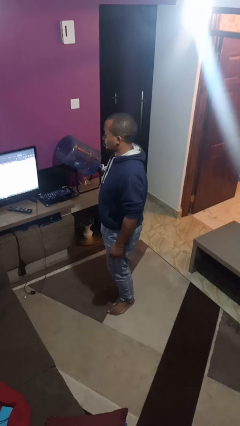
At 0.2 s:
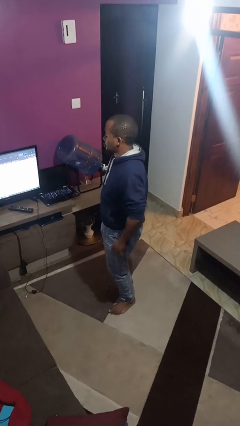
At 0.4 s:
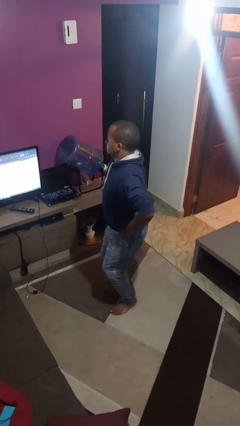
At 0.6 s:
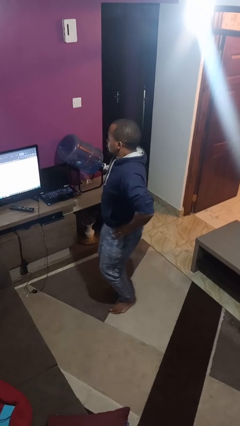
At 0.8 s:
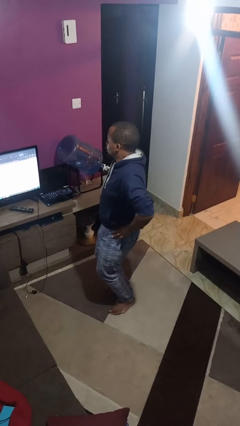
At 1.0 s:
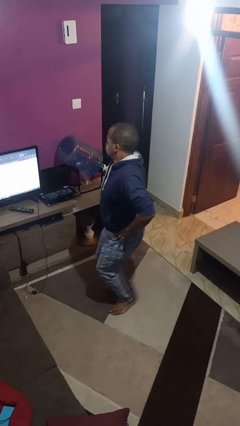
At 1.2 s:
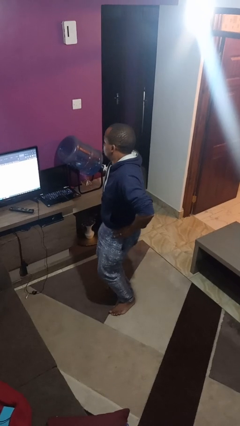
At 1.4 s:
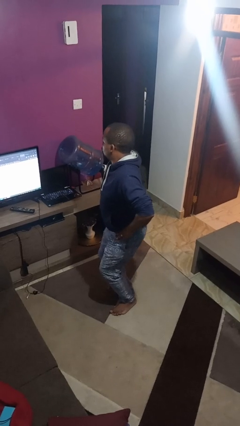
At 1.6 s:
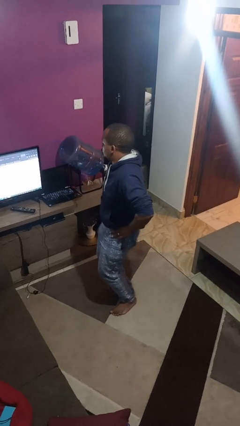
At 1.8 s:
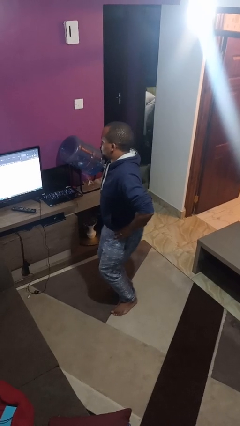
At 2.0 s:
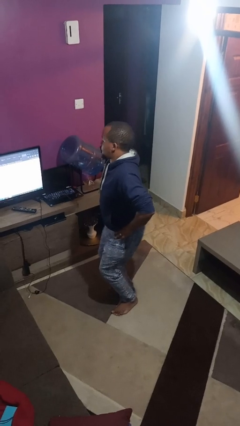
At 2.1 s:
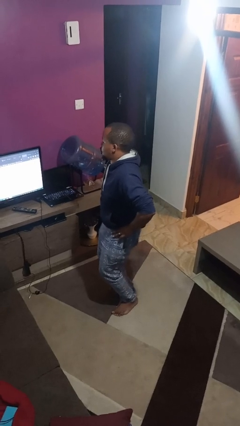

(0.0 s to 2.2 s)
person wiggles hips

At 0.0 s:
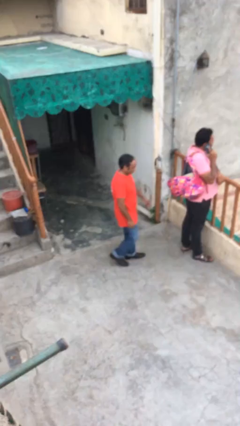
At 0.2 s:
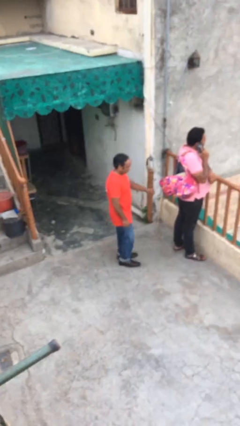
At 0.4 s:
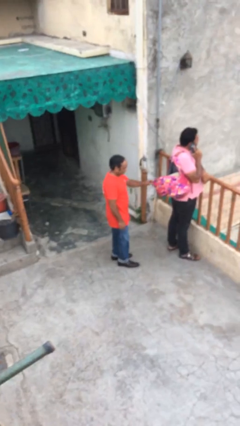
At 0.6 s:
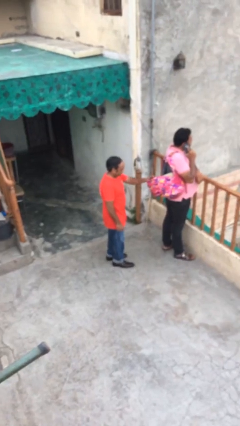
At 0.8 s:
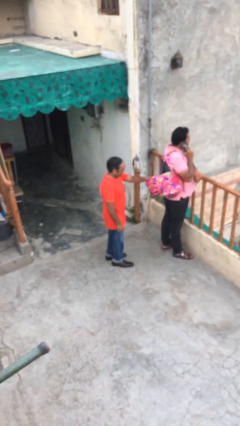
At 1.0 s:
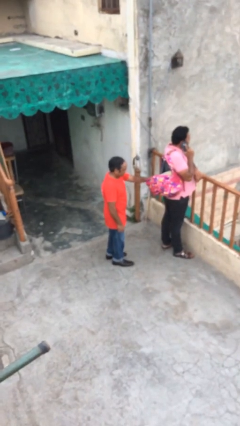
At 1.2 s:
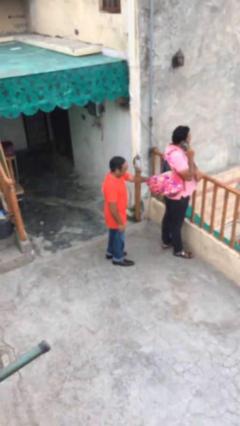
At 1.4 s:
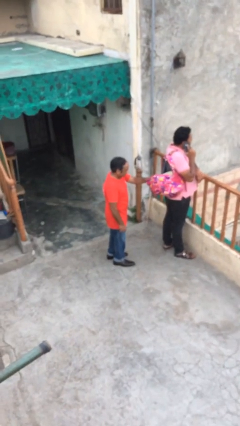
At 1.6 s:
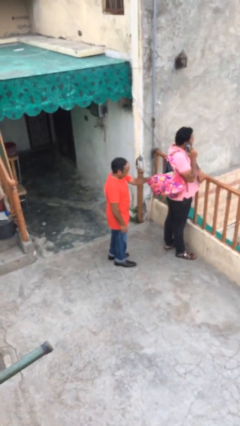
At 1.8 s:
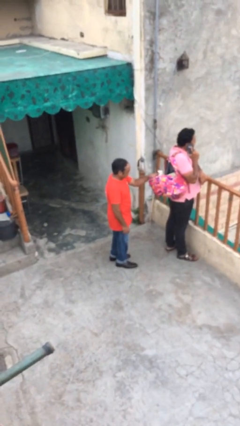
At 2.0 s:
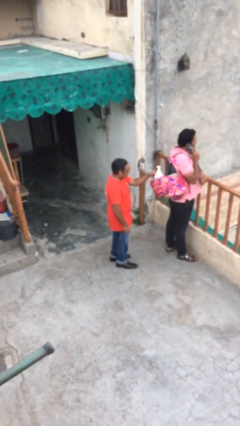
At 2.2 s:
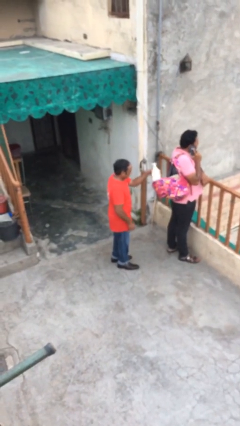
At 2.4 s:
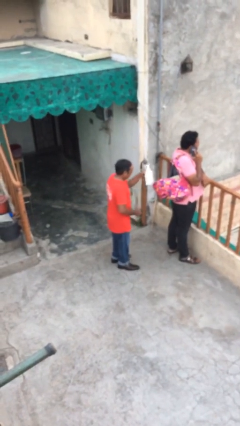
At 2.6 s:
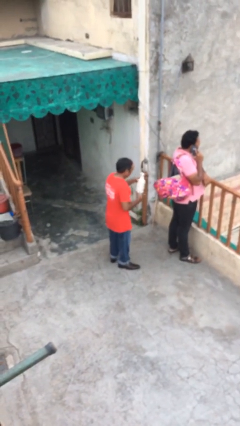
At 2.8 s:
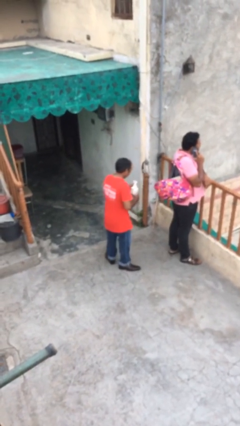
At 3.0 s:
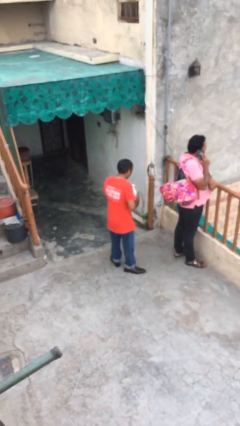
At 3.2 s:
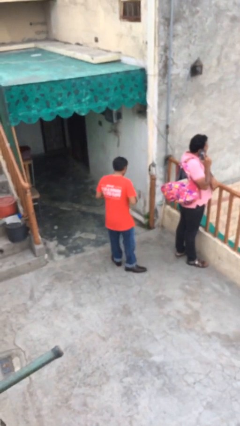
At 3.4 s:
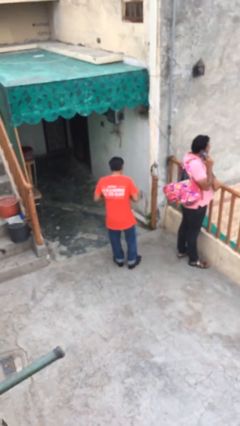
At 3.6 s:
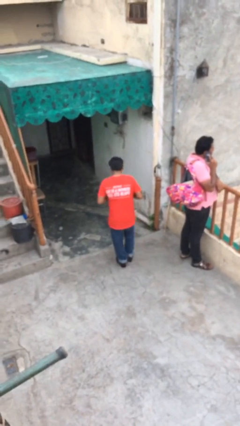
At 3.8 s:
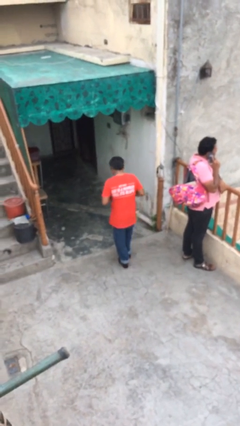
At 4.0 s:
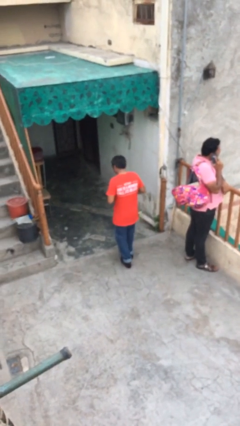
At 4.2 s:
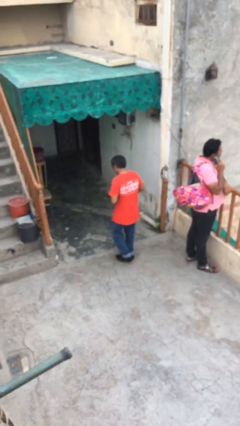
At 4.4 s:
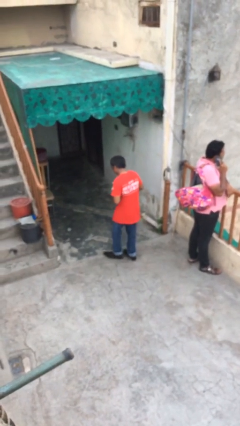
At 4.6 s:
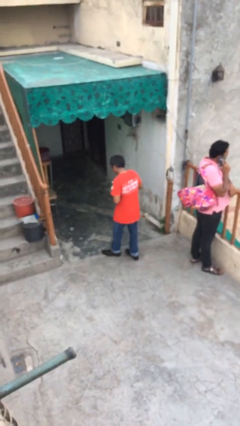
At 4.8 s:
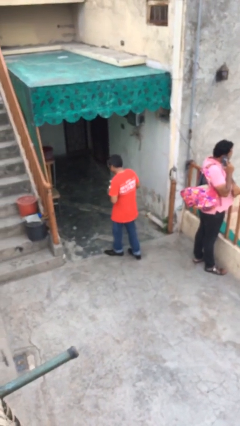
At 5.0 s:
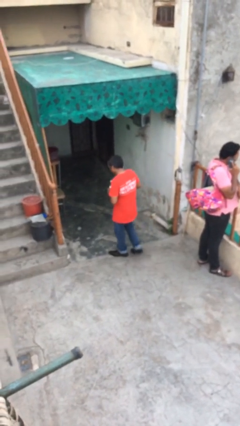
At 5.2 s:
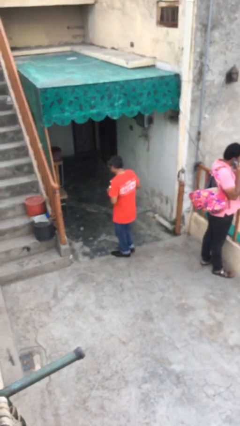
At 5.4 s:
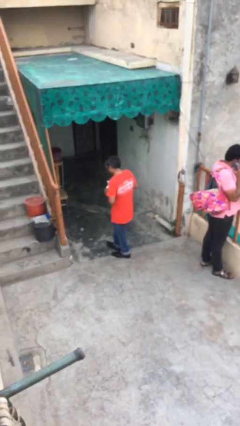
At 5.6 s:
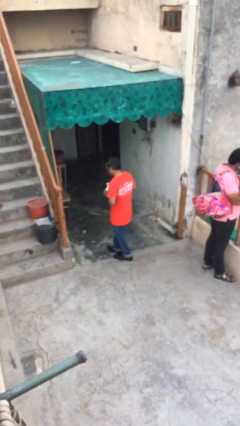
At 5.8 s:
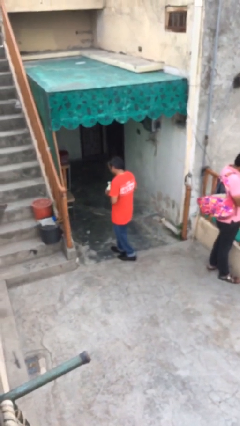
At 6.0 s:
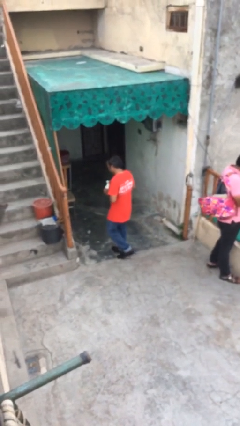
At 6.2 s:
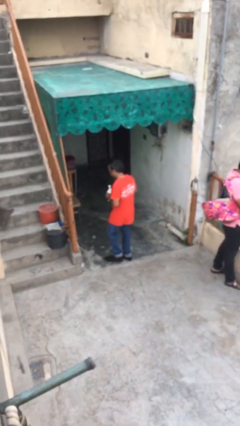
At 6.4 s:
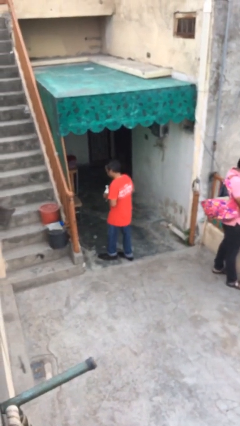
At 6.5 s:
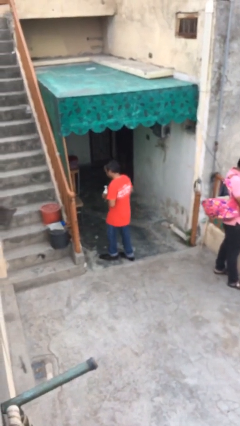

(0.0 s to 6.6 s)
person steals object from person

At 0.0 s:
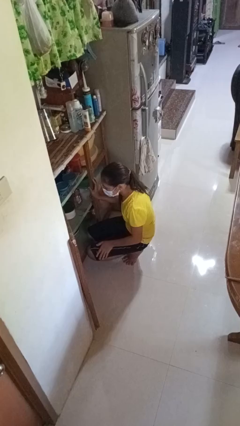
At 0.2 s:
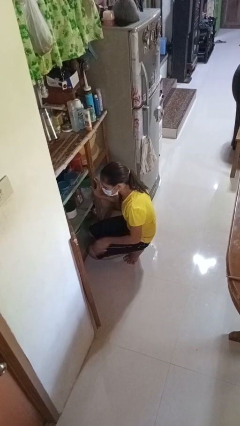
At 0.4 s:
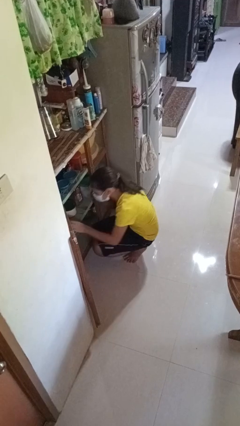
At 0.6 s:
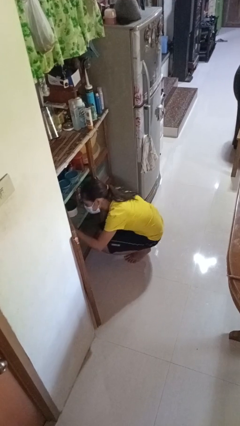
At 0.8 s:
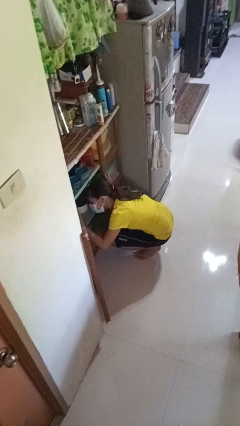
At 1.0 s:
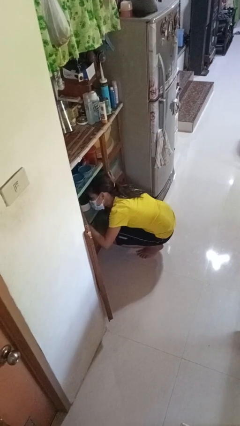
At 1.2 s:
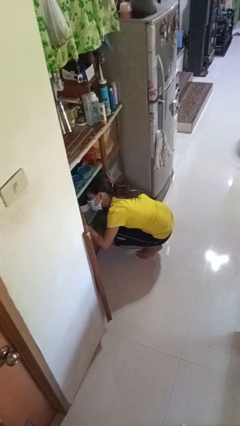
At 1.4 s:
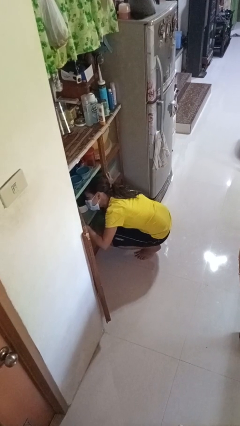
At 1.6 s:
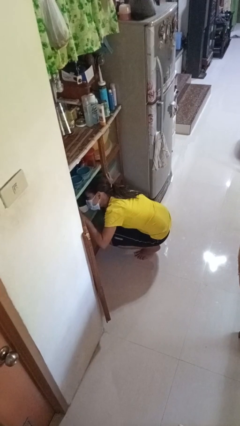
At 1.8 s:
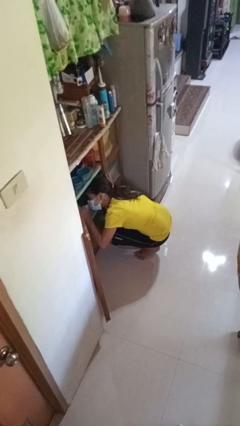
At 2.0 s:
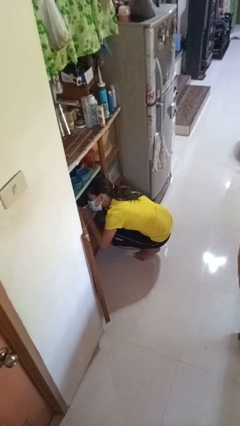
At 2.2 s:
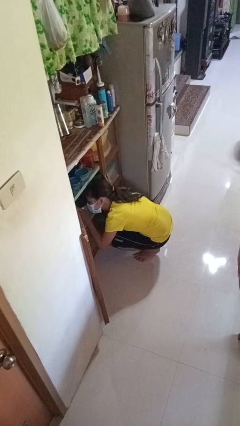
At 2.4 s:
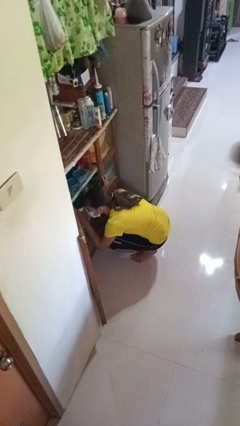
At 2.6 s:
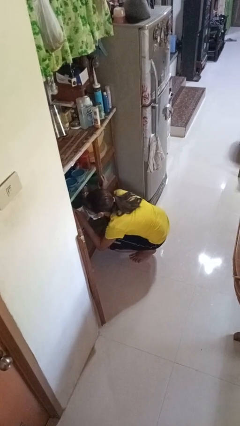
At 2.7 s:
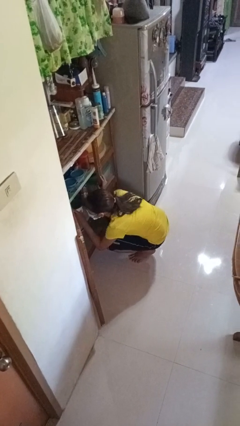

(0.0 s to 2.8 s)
person searches in cabinet

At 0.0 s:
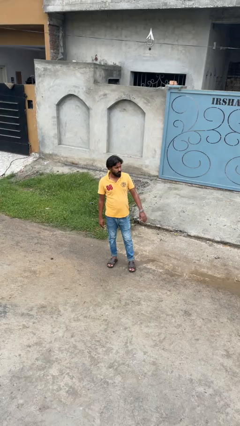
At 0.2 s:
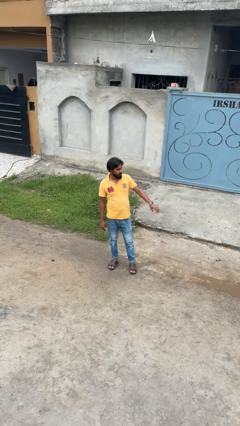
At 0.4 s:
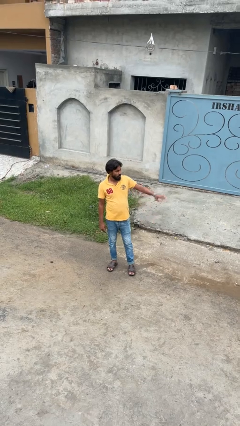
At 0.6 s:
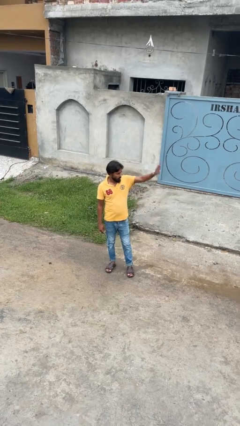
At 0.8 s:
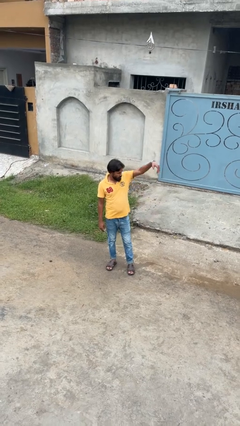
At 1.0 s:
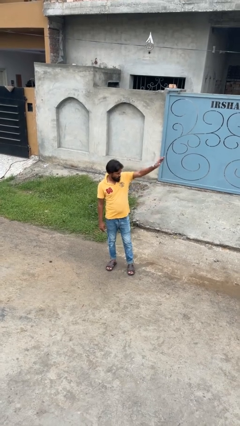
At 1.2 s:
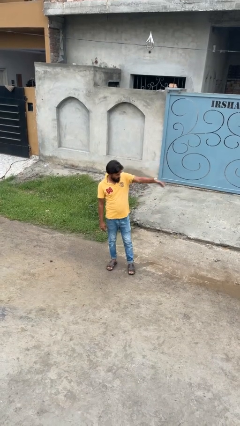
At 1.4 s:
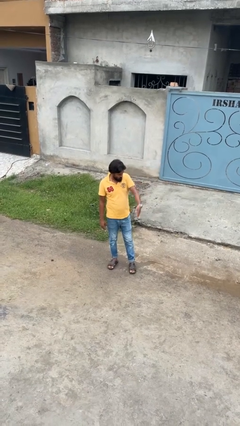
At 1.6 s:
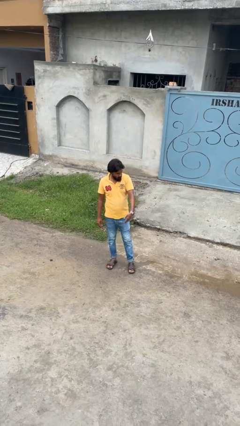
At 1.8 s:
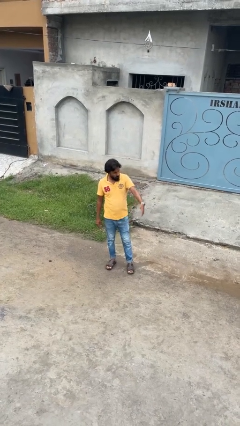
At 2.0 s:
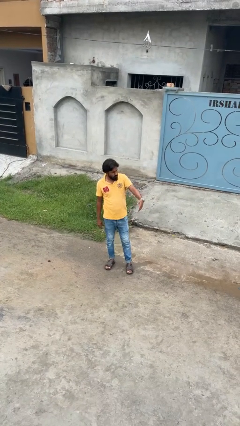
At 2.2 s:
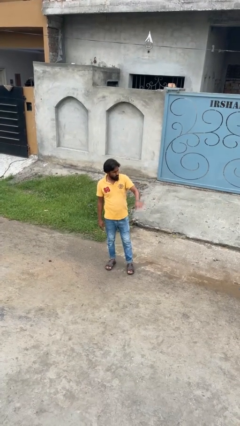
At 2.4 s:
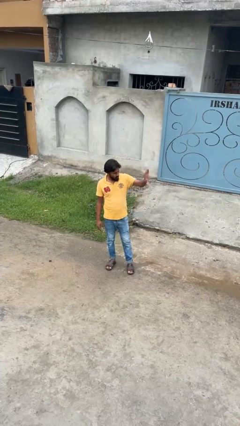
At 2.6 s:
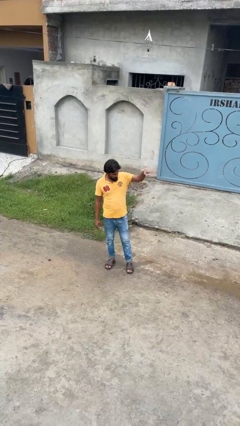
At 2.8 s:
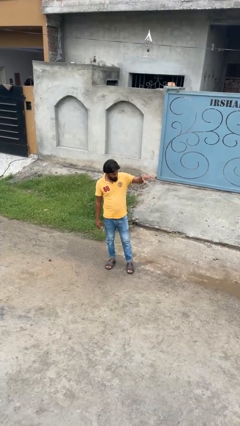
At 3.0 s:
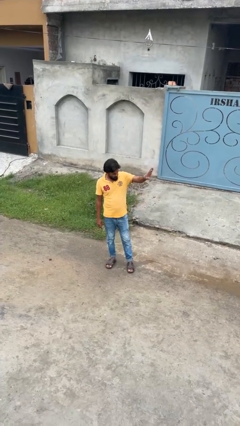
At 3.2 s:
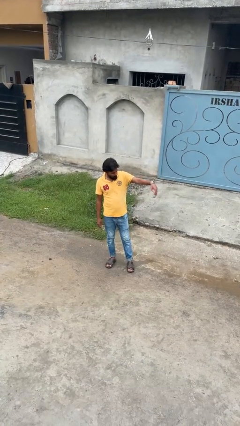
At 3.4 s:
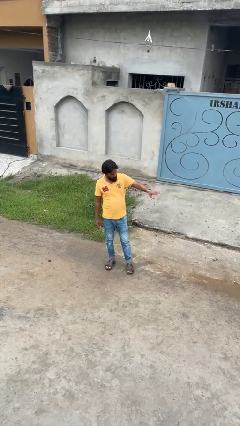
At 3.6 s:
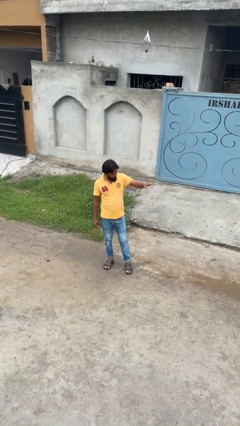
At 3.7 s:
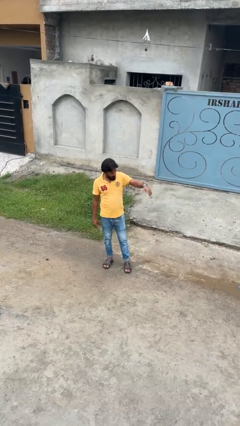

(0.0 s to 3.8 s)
person gestures come here

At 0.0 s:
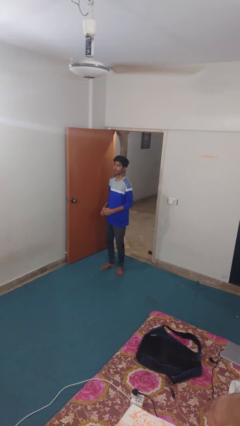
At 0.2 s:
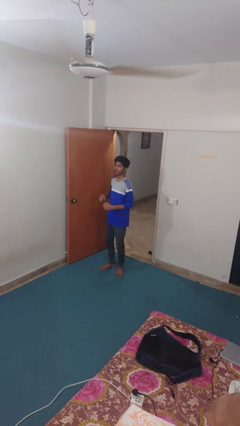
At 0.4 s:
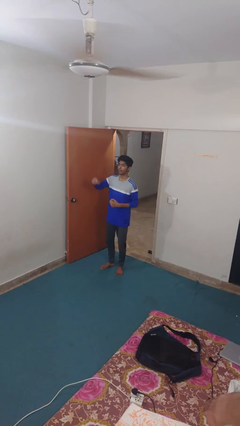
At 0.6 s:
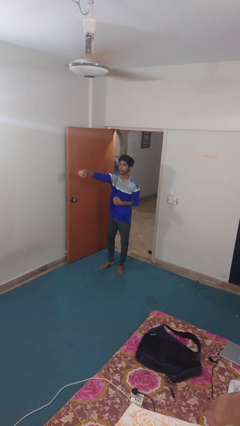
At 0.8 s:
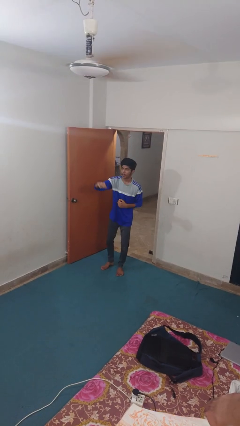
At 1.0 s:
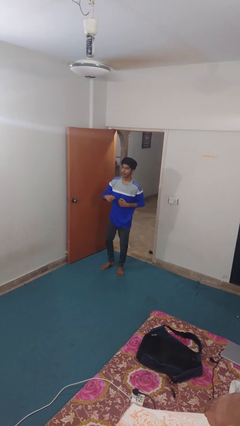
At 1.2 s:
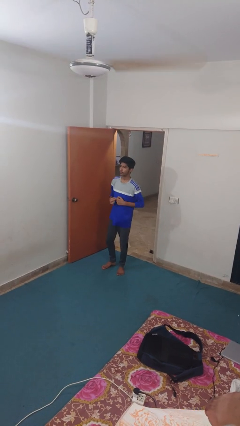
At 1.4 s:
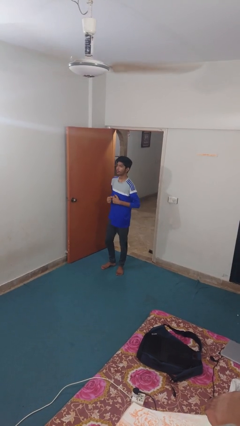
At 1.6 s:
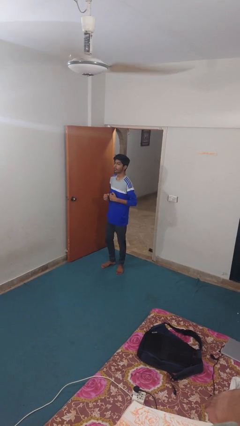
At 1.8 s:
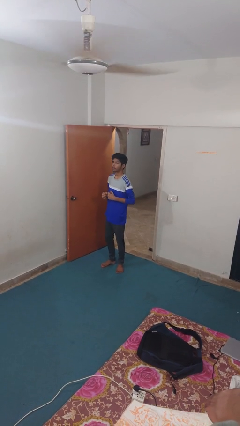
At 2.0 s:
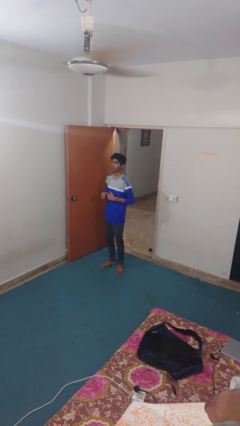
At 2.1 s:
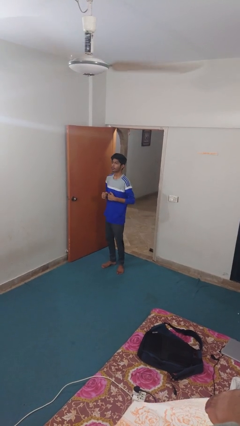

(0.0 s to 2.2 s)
person punches
